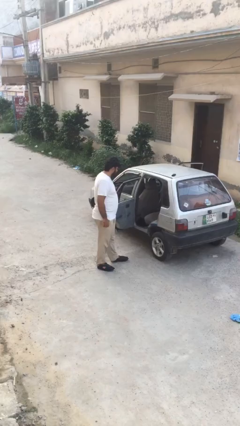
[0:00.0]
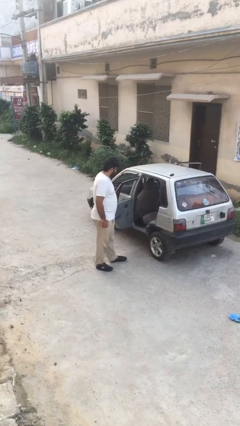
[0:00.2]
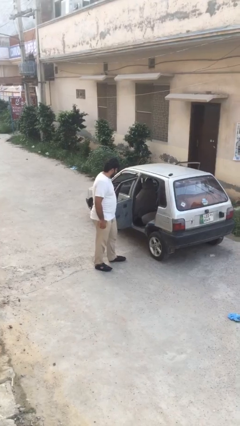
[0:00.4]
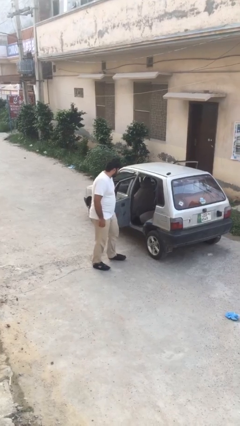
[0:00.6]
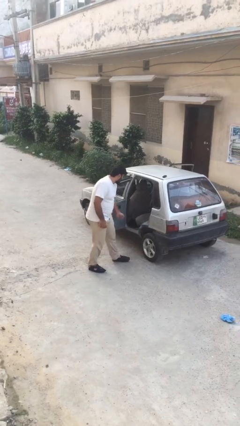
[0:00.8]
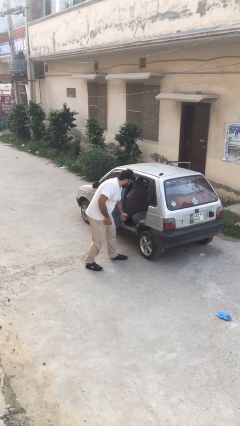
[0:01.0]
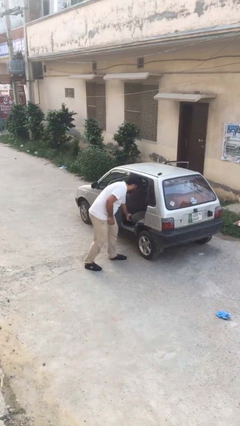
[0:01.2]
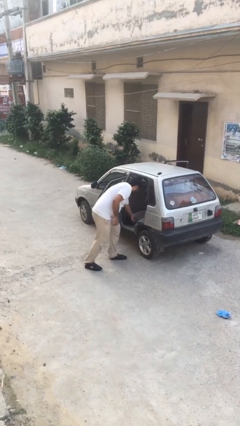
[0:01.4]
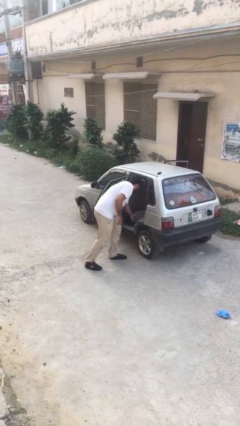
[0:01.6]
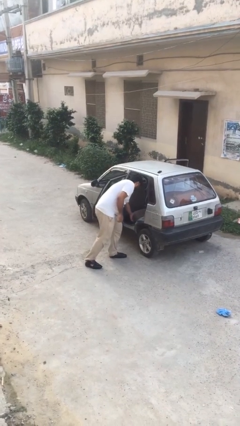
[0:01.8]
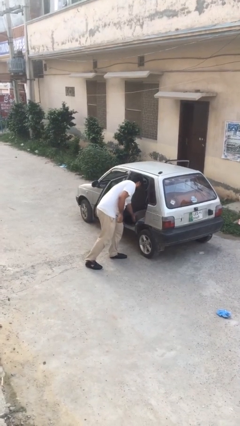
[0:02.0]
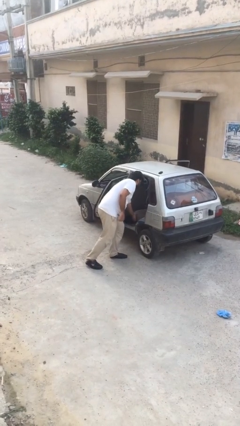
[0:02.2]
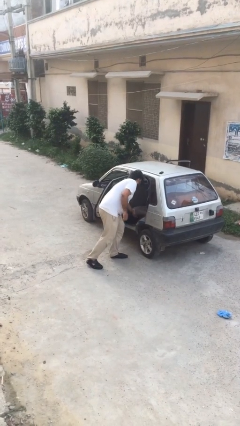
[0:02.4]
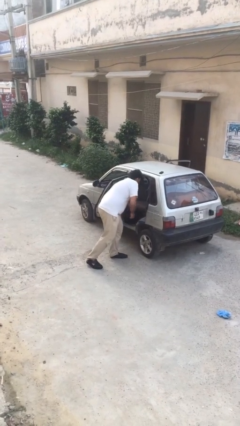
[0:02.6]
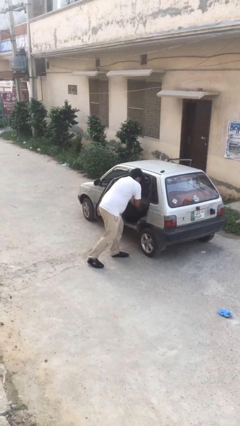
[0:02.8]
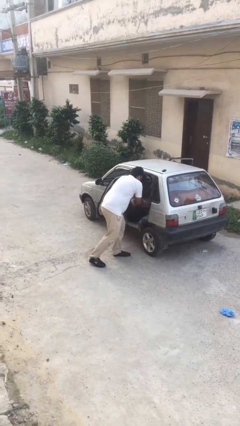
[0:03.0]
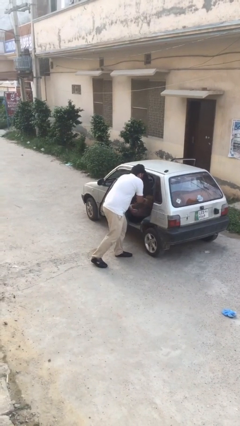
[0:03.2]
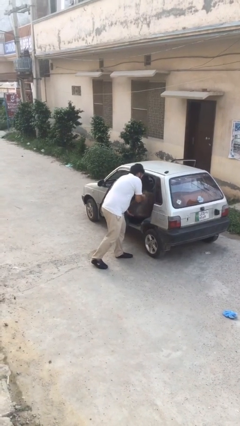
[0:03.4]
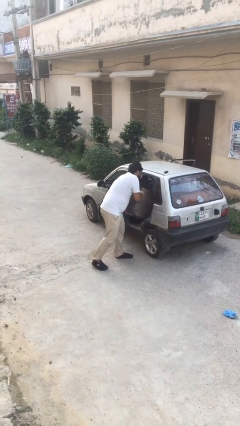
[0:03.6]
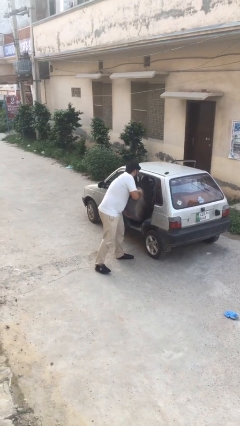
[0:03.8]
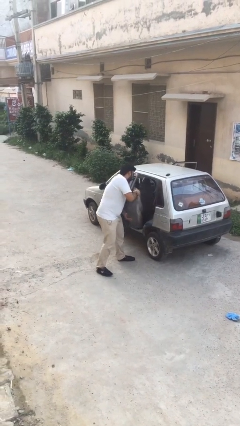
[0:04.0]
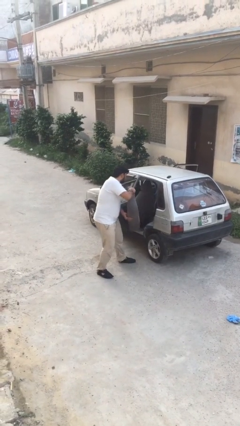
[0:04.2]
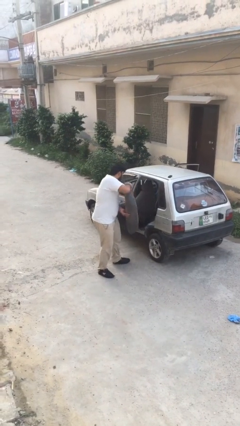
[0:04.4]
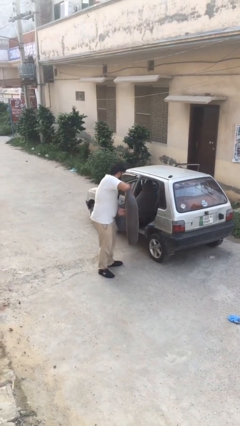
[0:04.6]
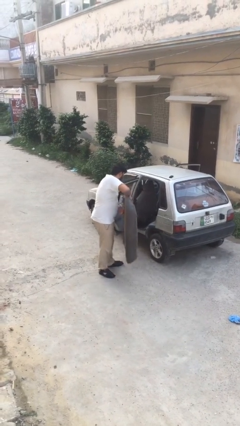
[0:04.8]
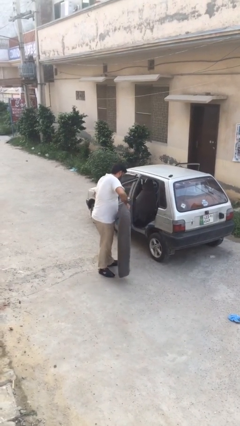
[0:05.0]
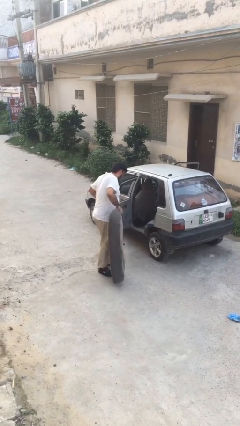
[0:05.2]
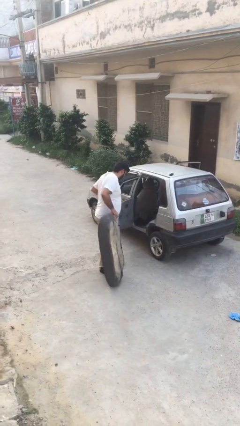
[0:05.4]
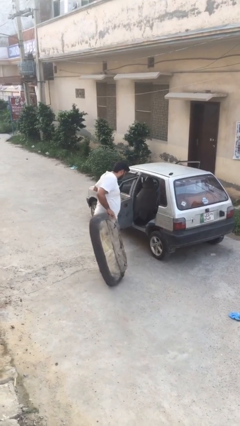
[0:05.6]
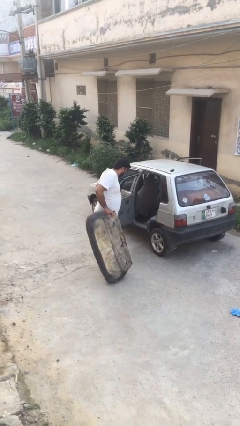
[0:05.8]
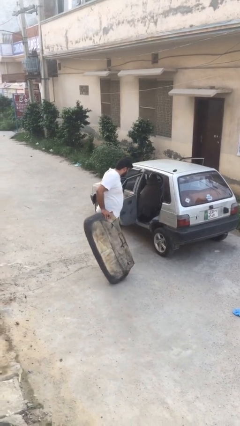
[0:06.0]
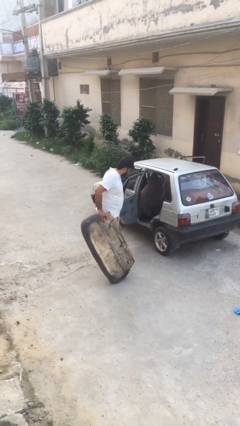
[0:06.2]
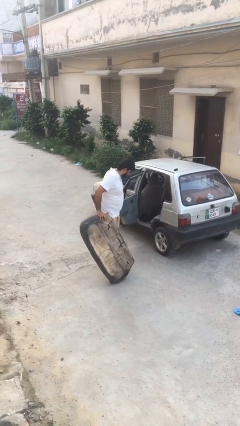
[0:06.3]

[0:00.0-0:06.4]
person unloads car

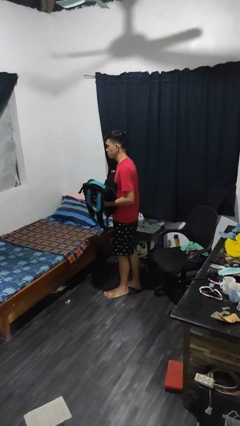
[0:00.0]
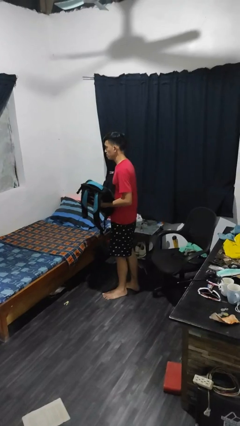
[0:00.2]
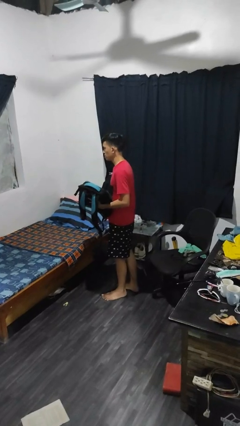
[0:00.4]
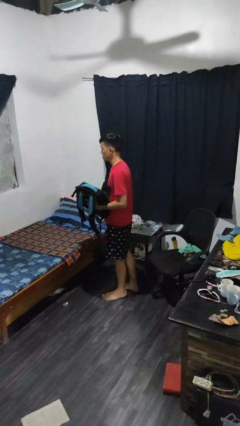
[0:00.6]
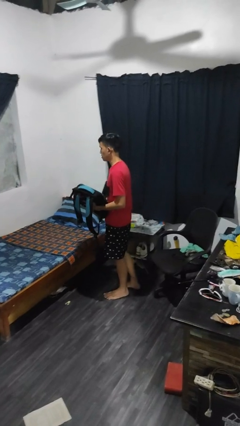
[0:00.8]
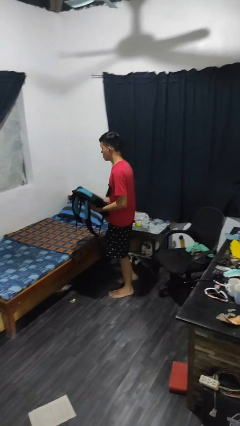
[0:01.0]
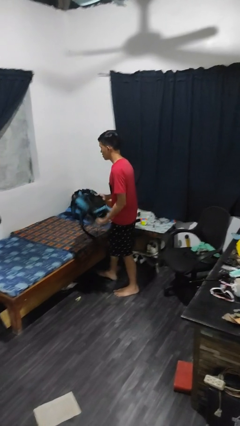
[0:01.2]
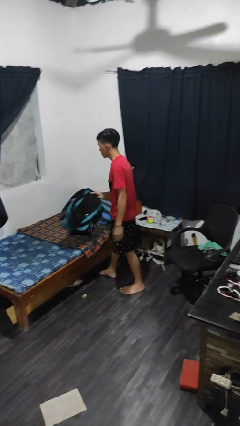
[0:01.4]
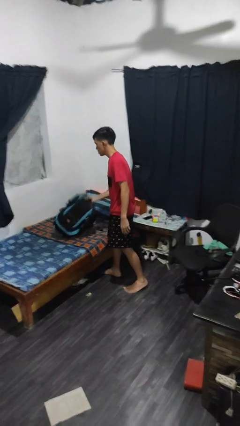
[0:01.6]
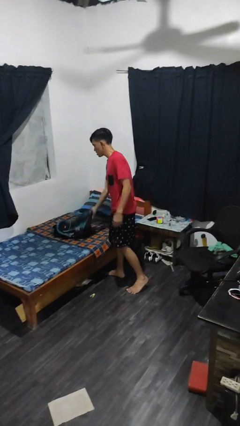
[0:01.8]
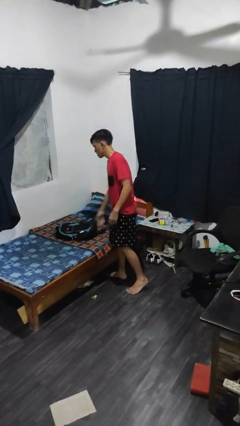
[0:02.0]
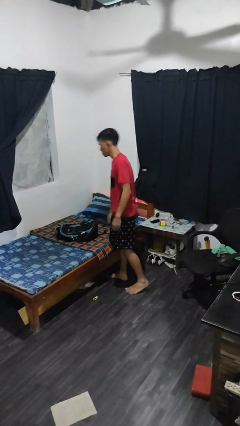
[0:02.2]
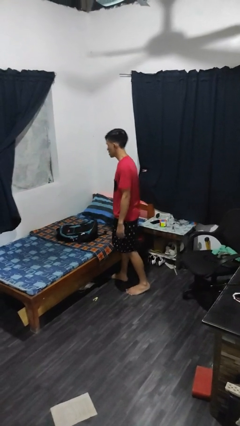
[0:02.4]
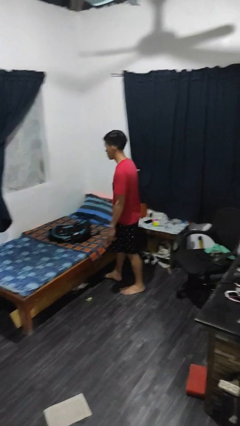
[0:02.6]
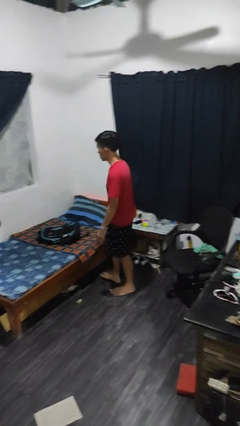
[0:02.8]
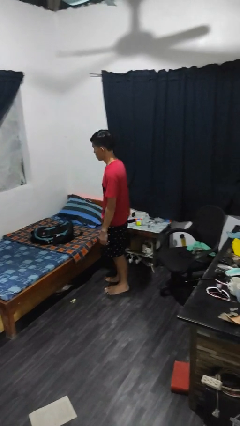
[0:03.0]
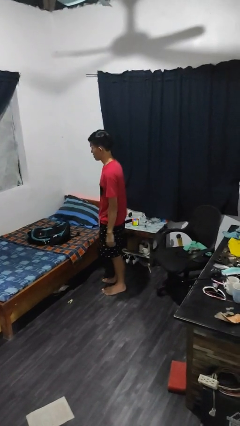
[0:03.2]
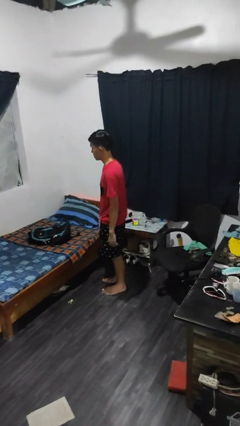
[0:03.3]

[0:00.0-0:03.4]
person puts down object on bed

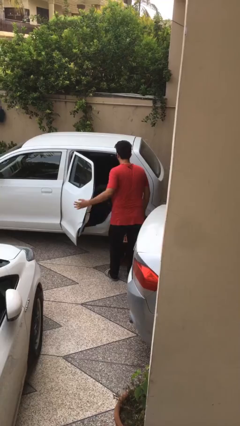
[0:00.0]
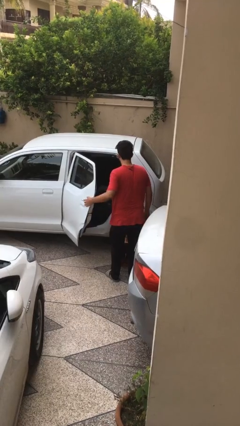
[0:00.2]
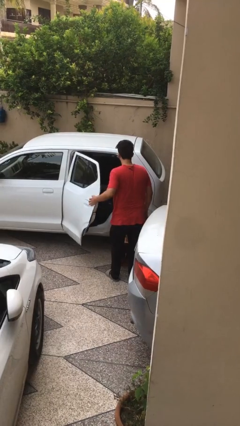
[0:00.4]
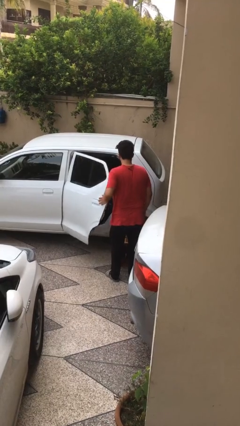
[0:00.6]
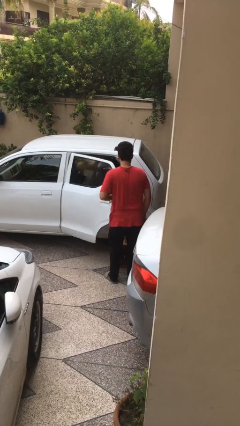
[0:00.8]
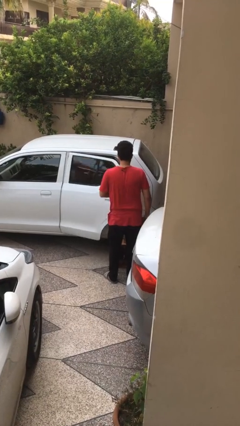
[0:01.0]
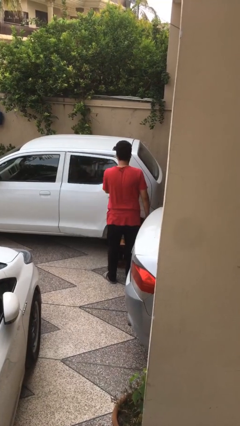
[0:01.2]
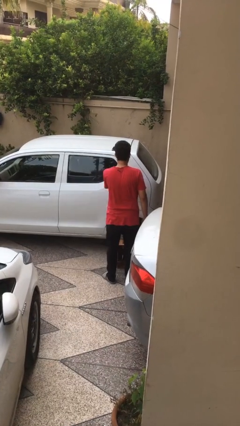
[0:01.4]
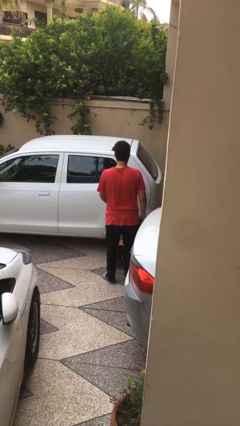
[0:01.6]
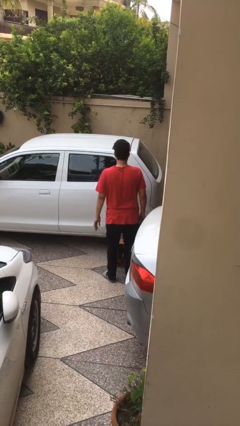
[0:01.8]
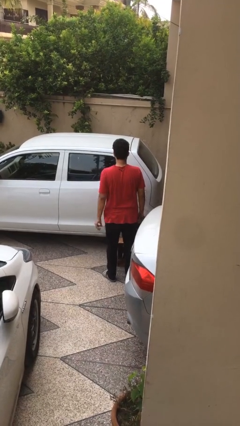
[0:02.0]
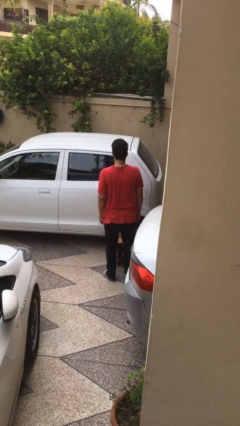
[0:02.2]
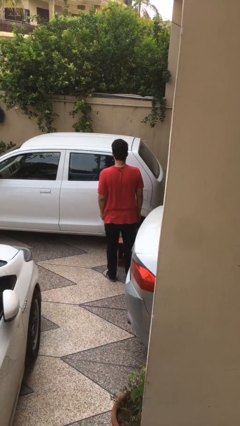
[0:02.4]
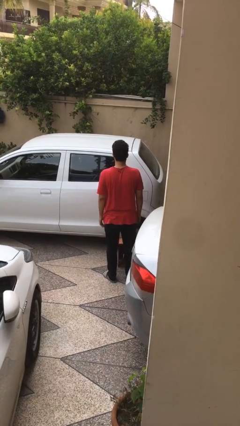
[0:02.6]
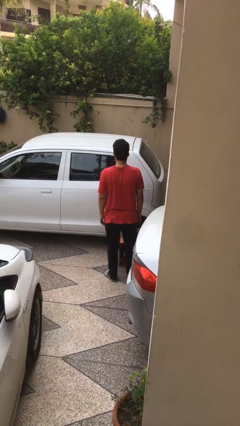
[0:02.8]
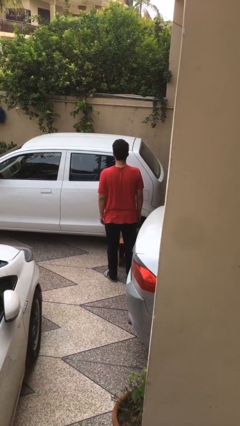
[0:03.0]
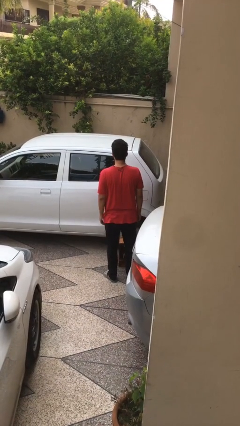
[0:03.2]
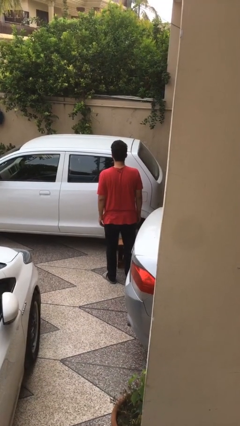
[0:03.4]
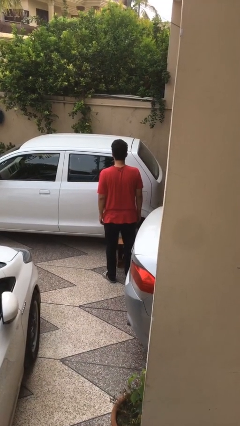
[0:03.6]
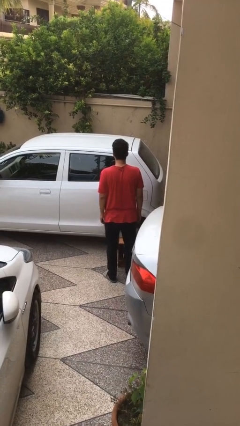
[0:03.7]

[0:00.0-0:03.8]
person closes car door

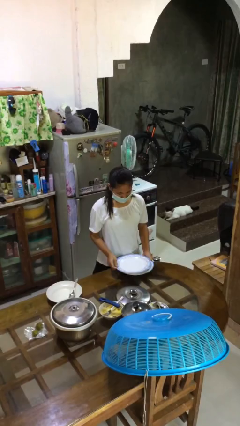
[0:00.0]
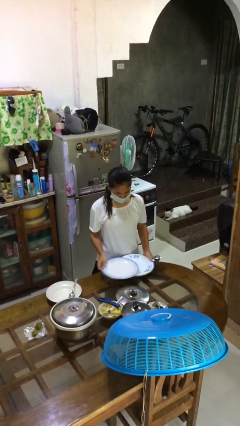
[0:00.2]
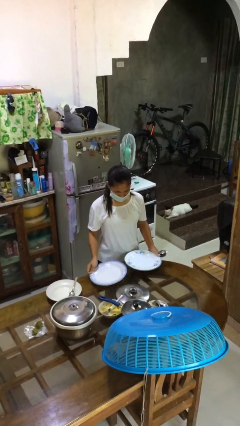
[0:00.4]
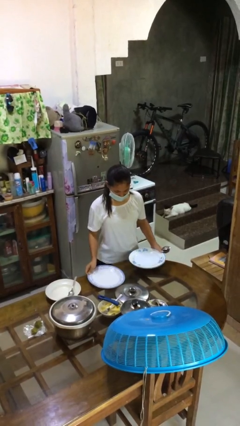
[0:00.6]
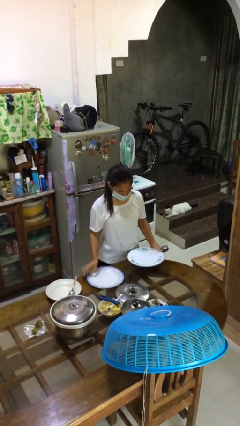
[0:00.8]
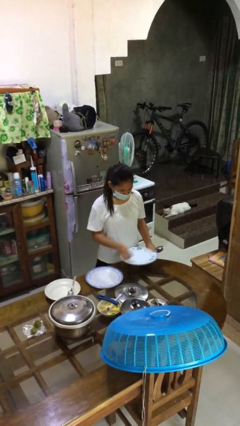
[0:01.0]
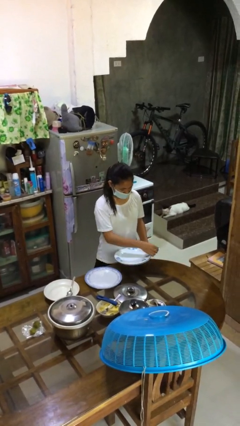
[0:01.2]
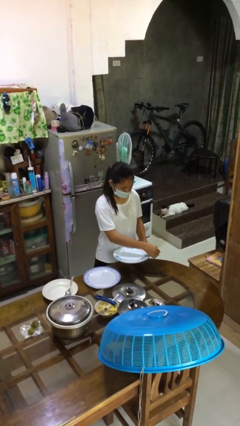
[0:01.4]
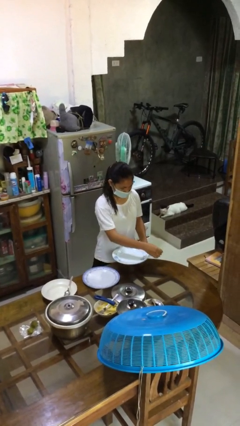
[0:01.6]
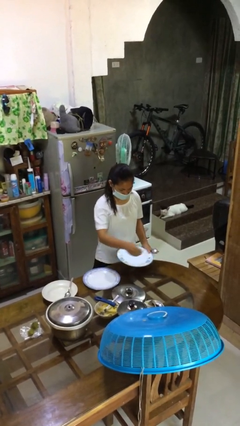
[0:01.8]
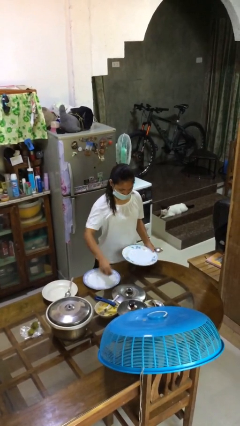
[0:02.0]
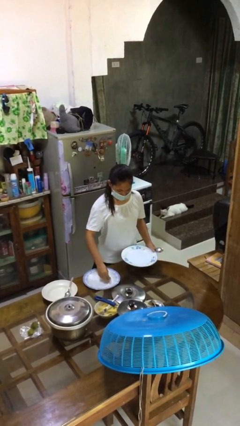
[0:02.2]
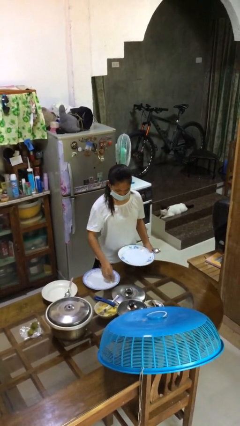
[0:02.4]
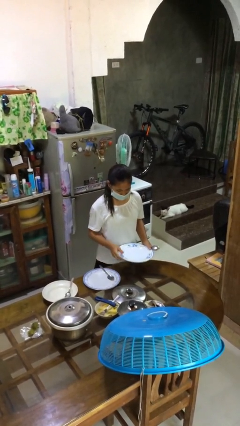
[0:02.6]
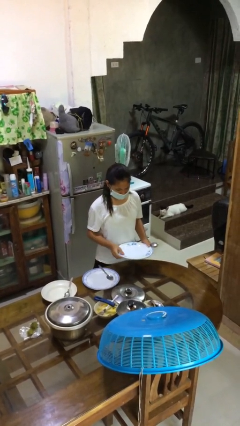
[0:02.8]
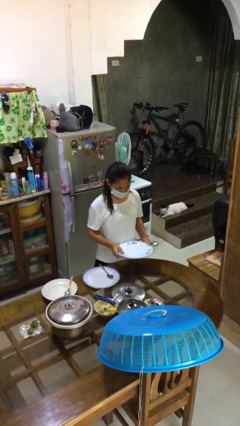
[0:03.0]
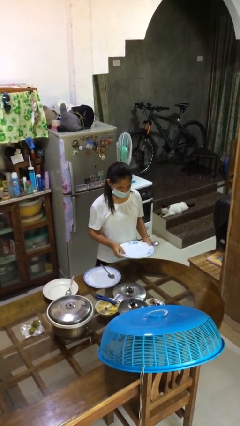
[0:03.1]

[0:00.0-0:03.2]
person sets table

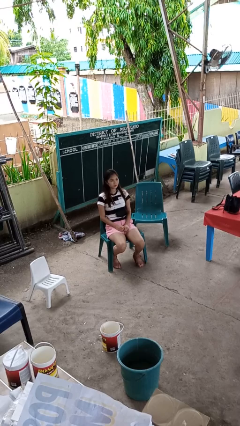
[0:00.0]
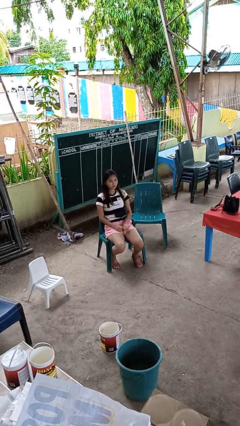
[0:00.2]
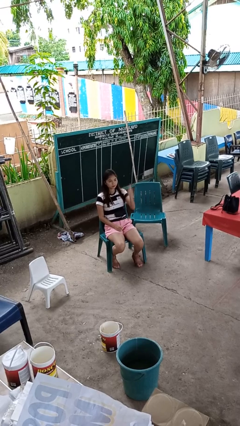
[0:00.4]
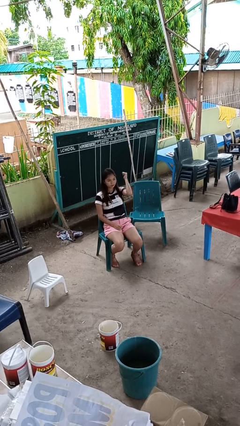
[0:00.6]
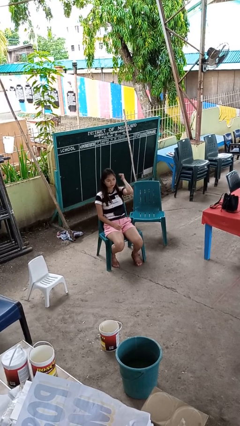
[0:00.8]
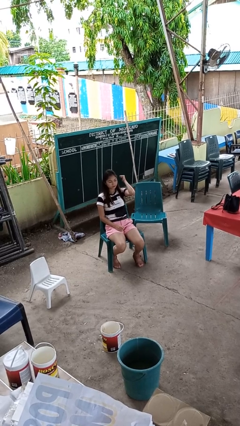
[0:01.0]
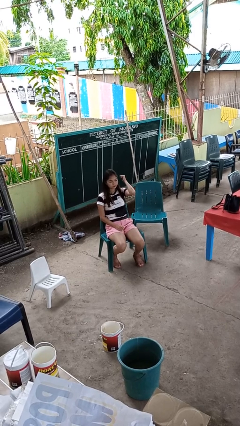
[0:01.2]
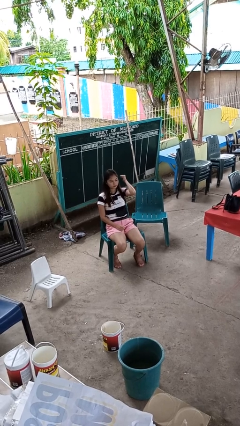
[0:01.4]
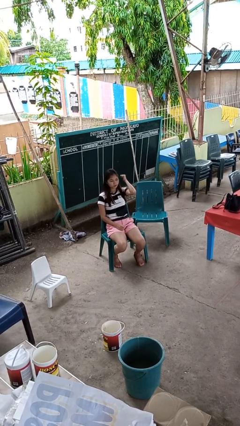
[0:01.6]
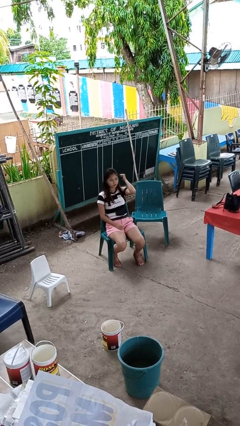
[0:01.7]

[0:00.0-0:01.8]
person gestures behind me
